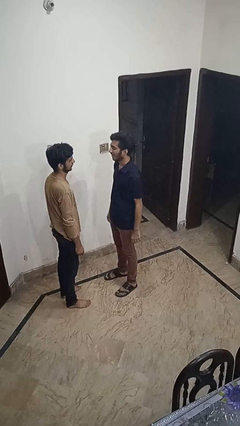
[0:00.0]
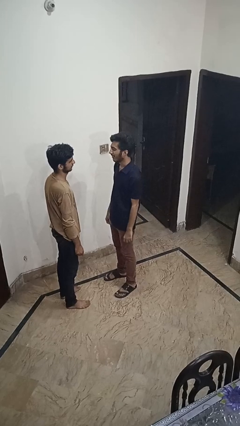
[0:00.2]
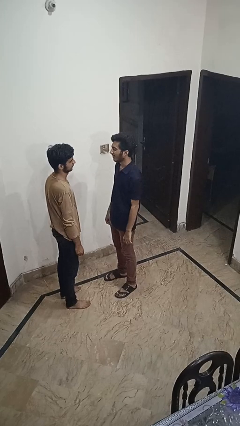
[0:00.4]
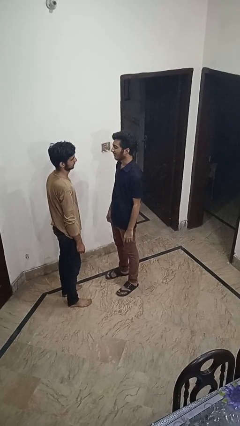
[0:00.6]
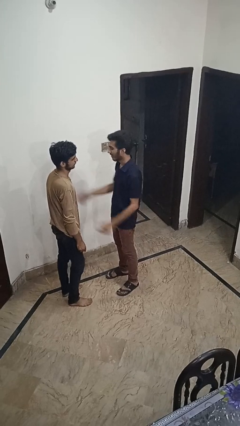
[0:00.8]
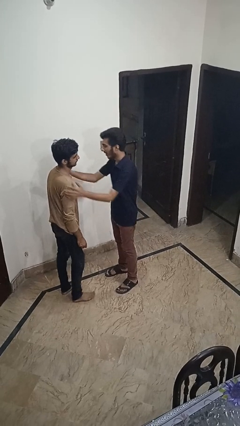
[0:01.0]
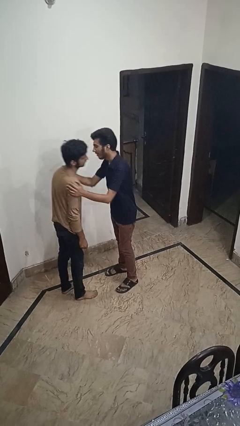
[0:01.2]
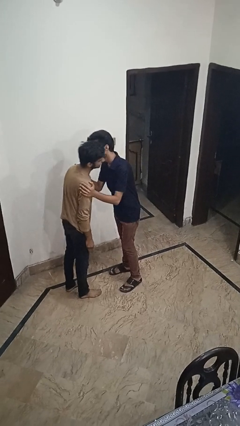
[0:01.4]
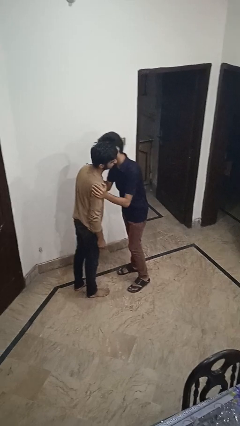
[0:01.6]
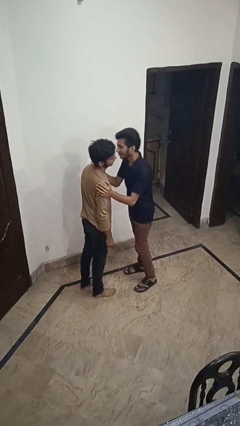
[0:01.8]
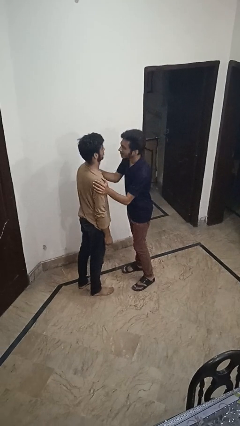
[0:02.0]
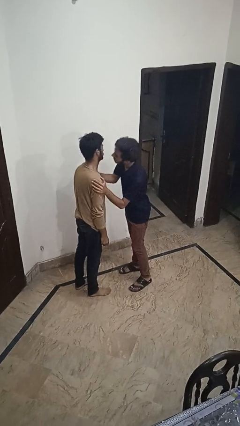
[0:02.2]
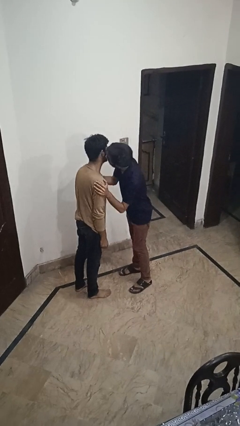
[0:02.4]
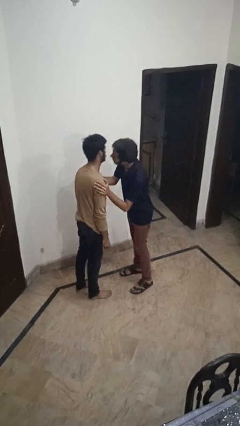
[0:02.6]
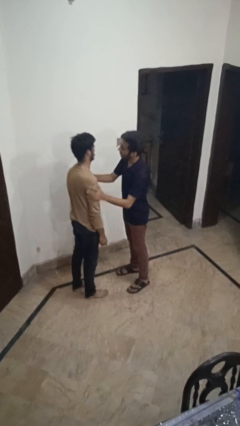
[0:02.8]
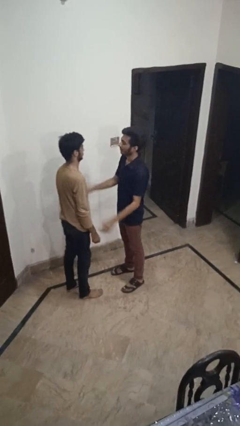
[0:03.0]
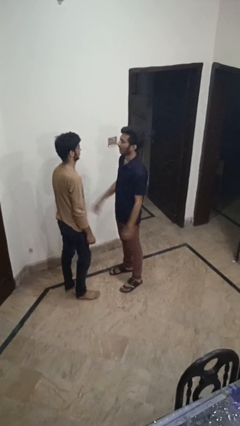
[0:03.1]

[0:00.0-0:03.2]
person kisses cheek of person

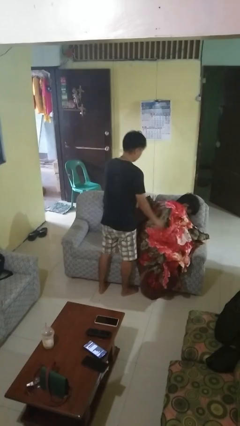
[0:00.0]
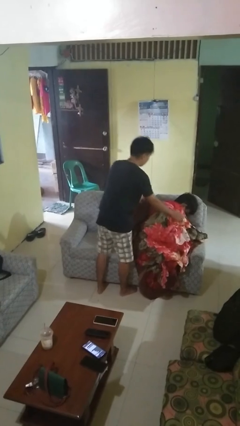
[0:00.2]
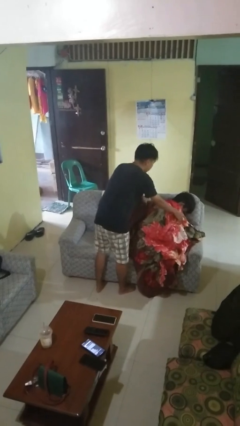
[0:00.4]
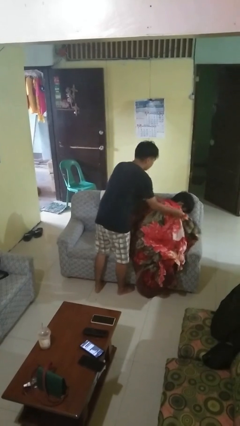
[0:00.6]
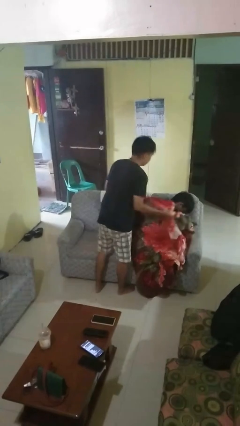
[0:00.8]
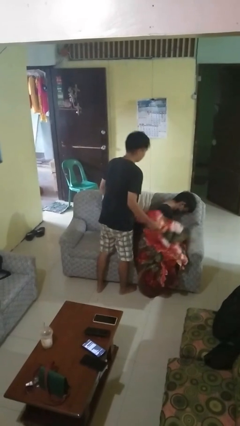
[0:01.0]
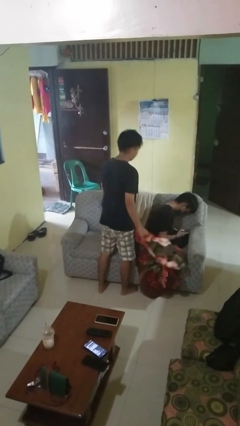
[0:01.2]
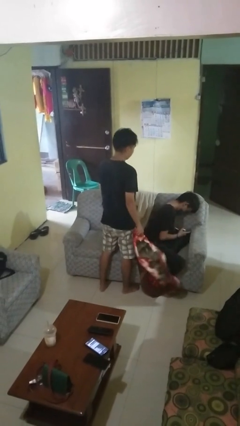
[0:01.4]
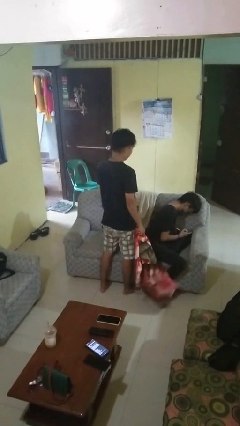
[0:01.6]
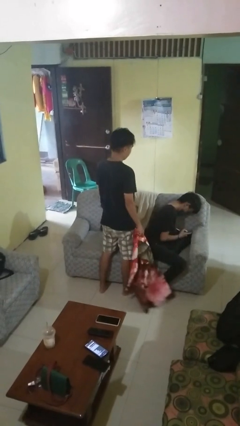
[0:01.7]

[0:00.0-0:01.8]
person uncovers friend with blanket

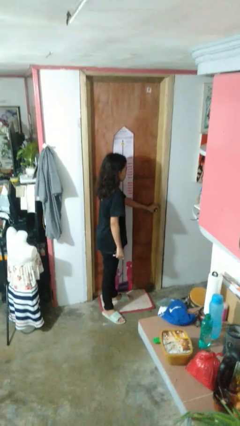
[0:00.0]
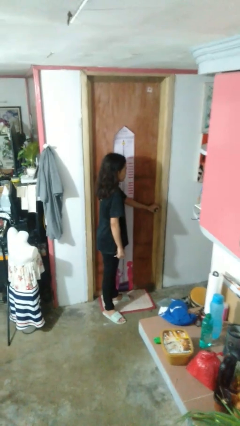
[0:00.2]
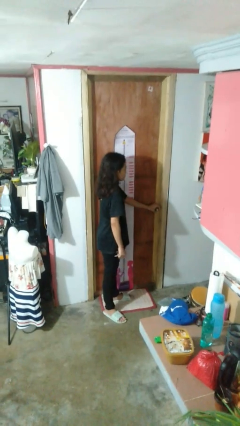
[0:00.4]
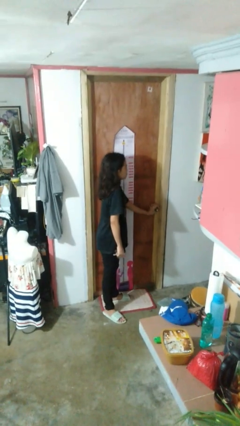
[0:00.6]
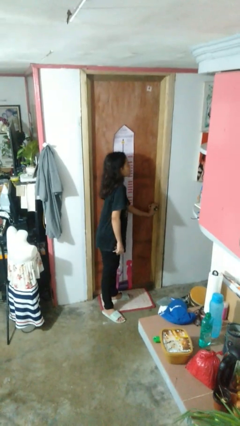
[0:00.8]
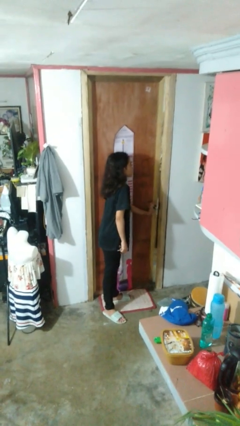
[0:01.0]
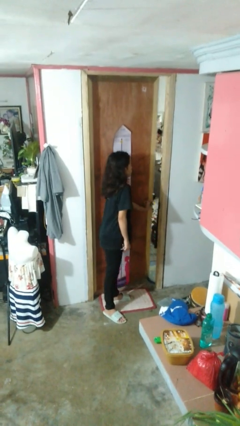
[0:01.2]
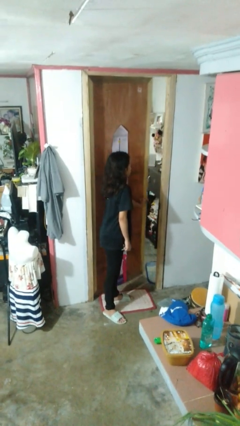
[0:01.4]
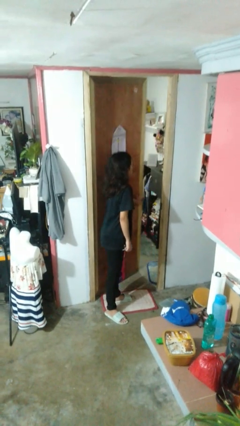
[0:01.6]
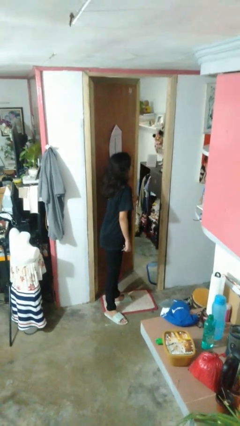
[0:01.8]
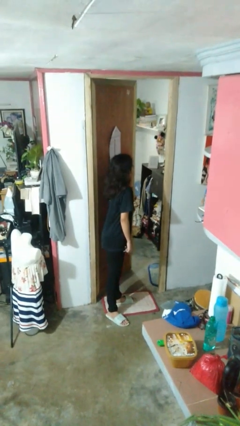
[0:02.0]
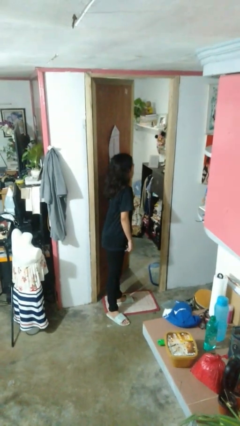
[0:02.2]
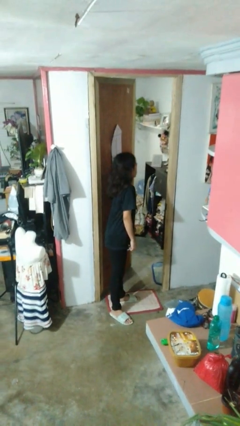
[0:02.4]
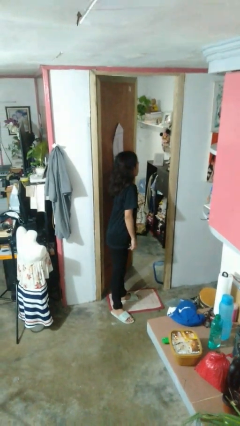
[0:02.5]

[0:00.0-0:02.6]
person opens facility door

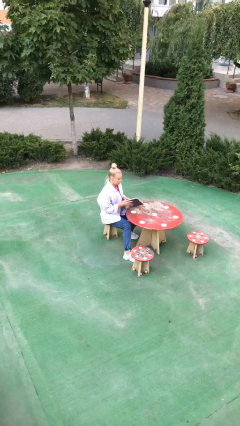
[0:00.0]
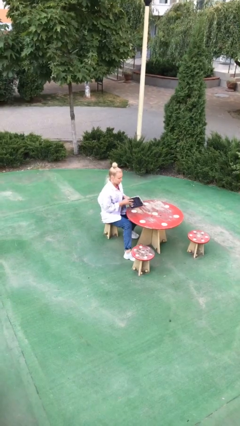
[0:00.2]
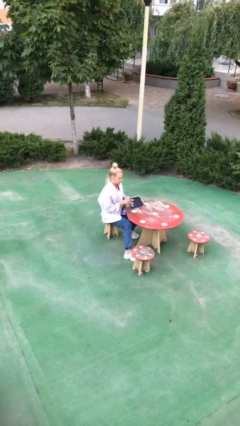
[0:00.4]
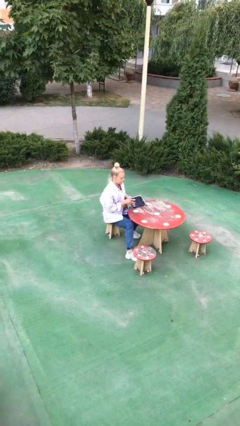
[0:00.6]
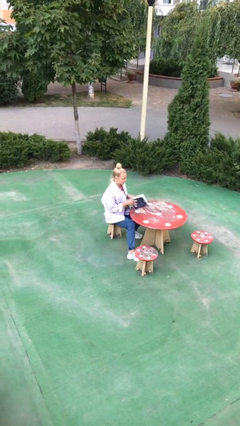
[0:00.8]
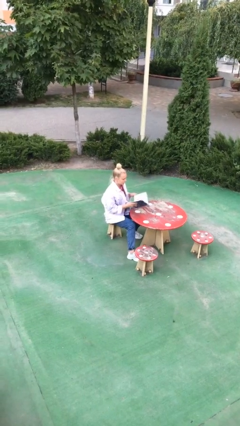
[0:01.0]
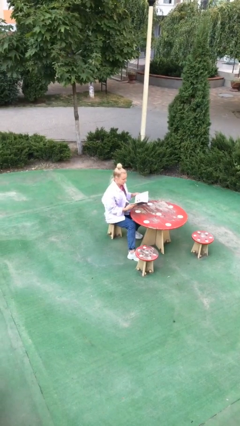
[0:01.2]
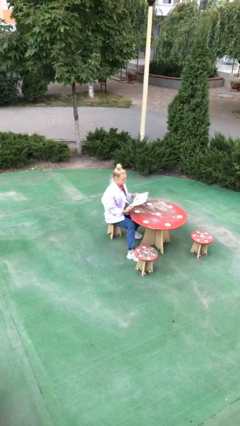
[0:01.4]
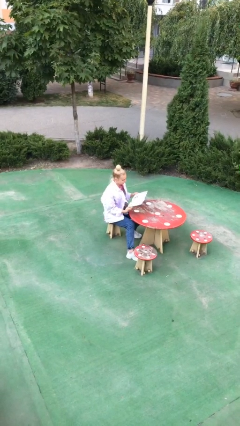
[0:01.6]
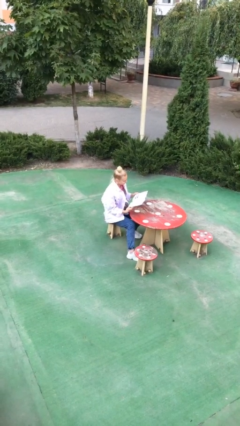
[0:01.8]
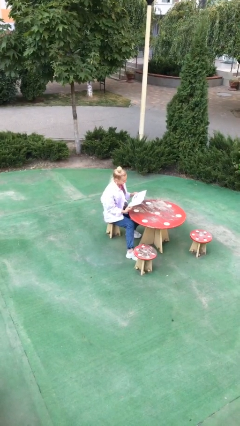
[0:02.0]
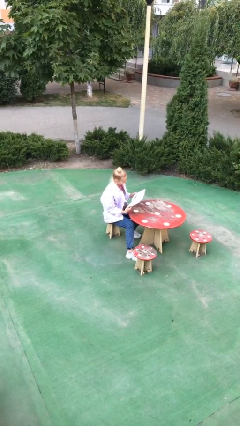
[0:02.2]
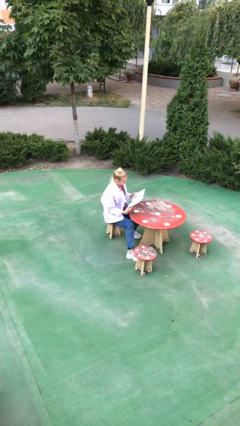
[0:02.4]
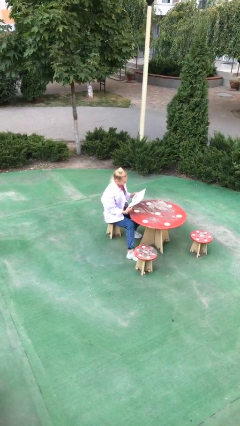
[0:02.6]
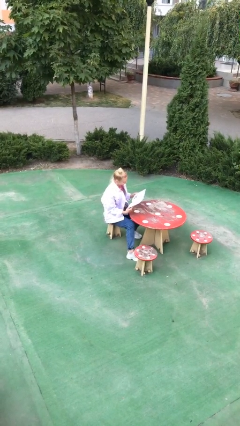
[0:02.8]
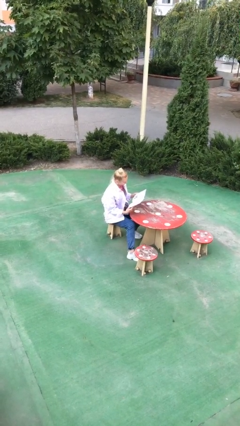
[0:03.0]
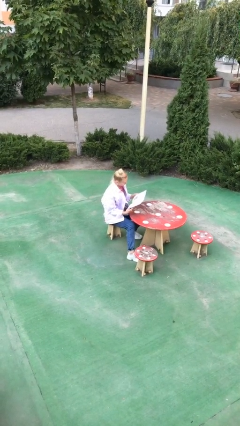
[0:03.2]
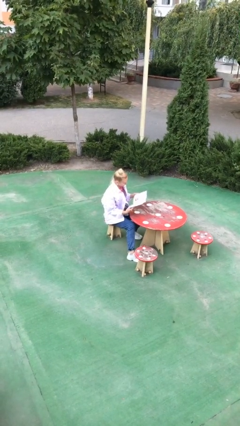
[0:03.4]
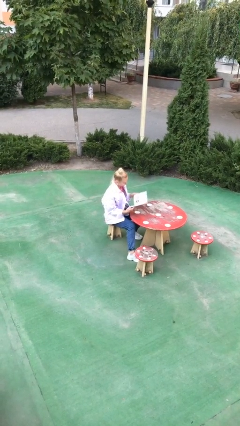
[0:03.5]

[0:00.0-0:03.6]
person reads document

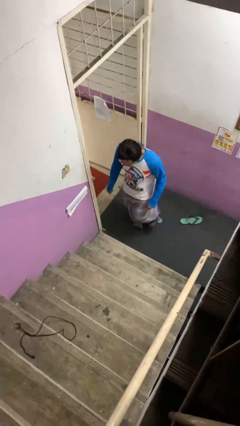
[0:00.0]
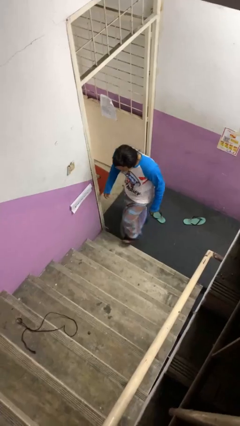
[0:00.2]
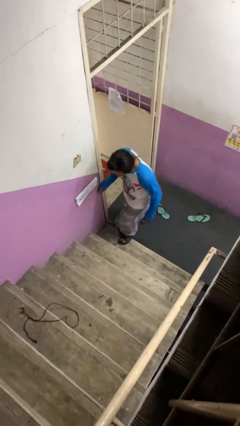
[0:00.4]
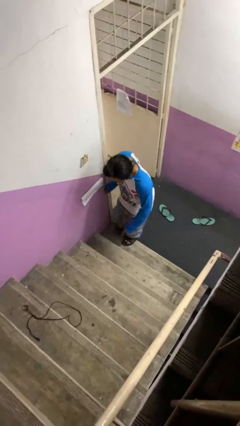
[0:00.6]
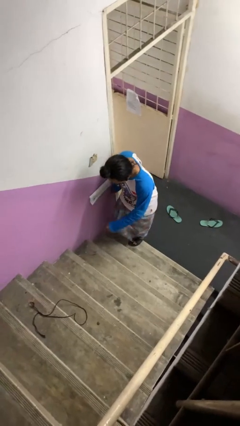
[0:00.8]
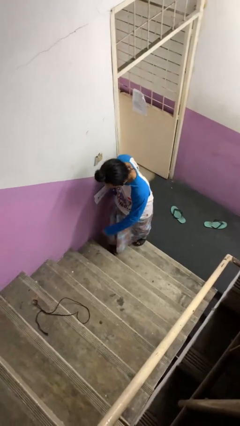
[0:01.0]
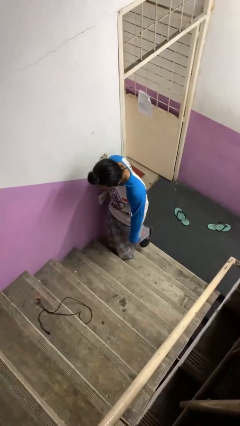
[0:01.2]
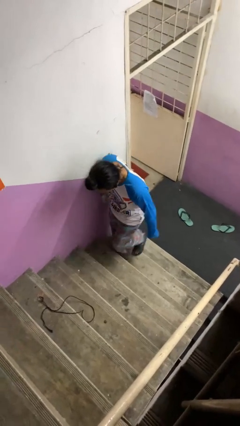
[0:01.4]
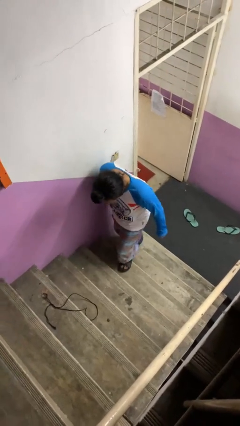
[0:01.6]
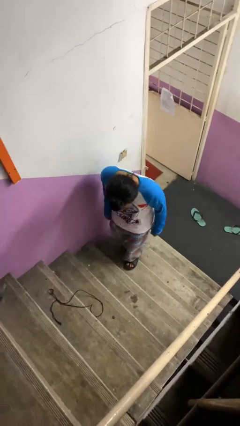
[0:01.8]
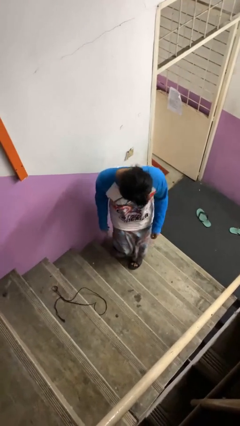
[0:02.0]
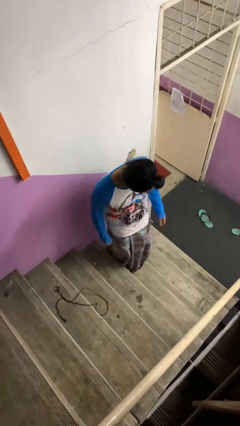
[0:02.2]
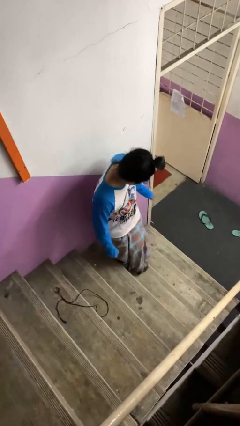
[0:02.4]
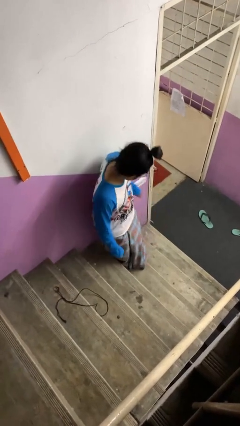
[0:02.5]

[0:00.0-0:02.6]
person climbs up stairs

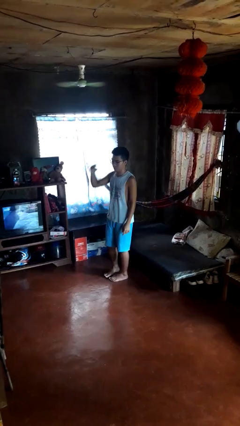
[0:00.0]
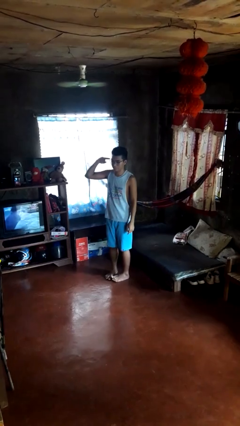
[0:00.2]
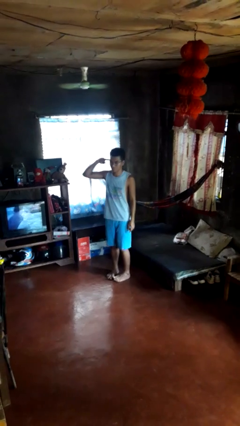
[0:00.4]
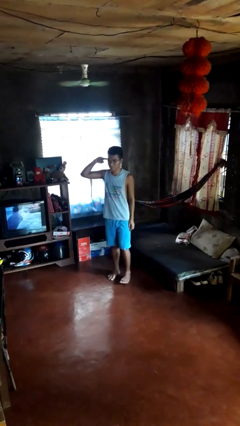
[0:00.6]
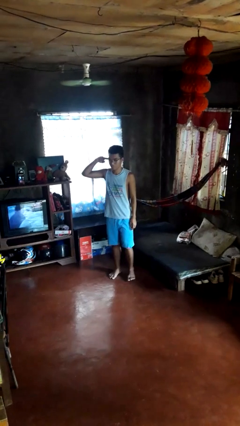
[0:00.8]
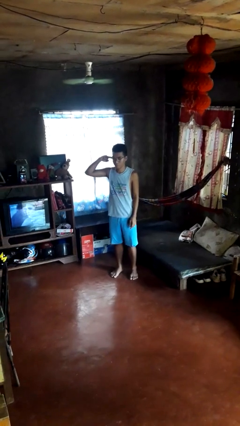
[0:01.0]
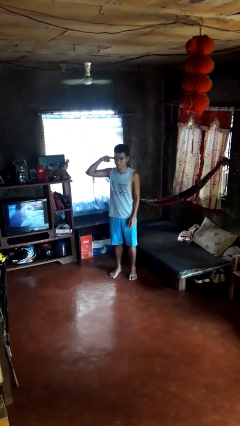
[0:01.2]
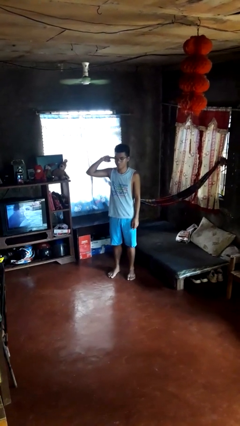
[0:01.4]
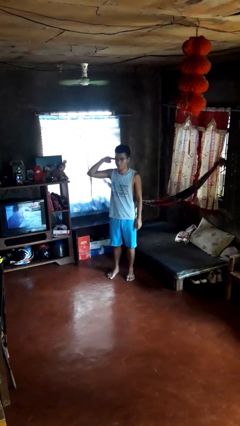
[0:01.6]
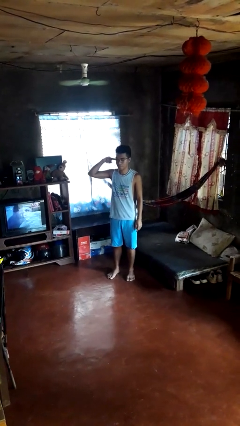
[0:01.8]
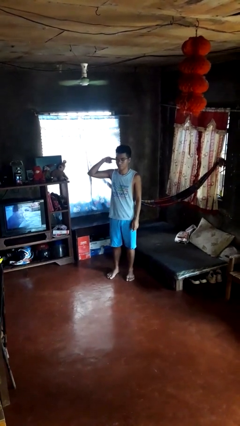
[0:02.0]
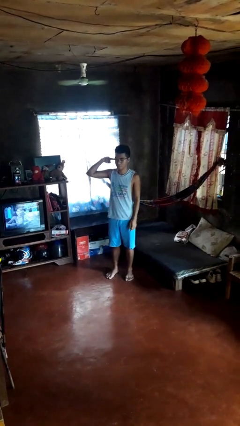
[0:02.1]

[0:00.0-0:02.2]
person gestures listen closely

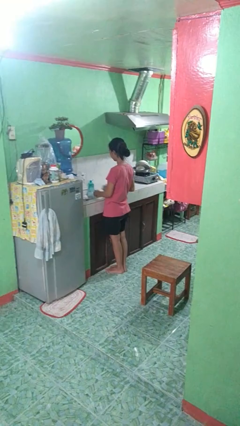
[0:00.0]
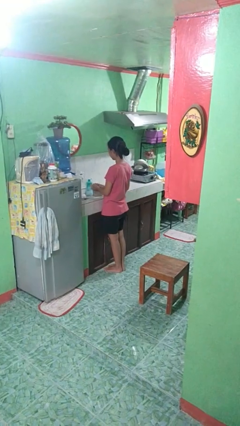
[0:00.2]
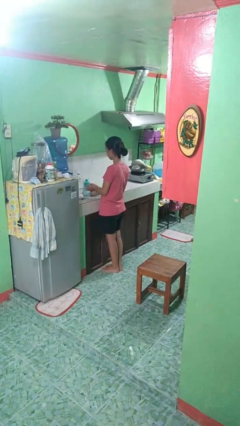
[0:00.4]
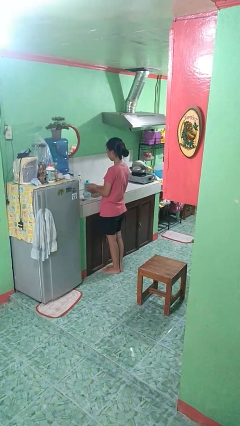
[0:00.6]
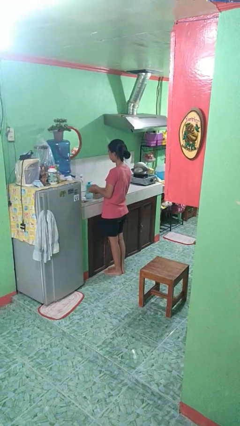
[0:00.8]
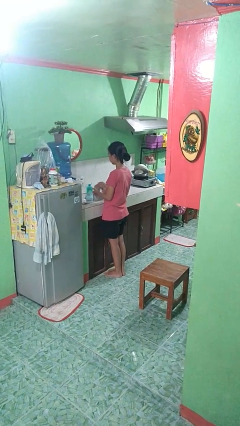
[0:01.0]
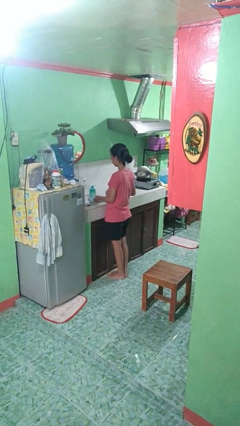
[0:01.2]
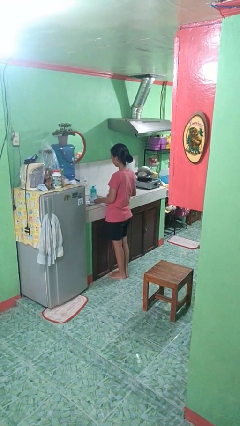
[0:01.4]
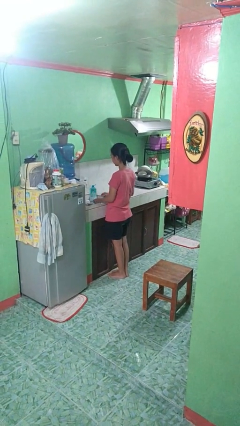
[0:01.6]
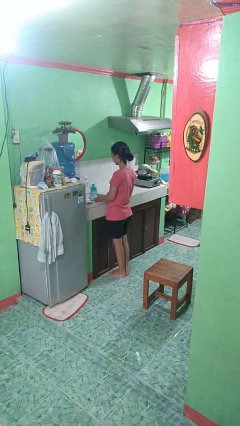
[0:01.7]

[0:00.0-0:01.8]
person dries hands with towel
